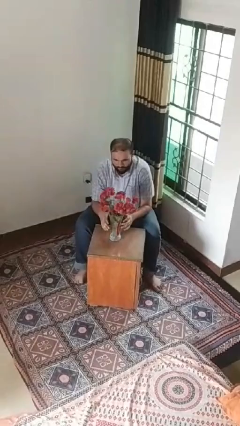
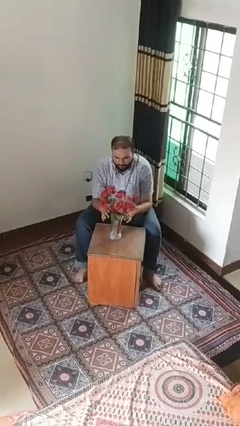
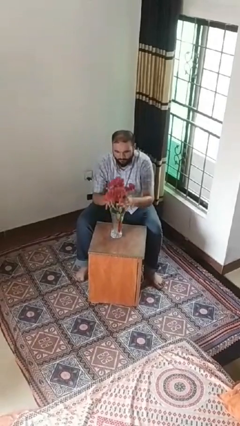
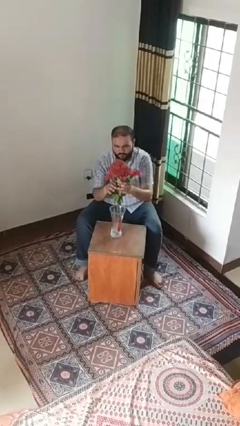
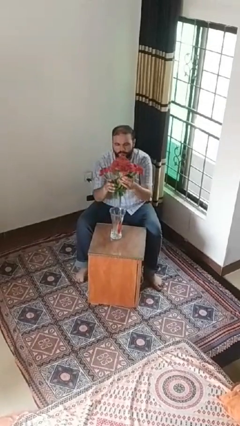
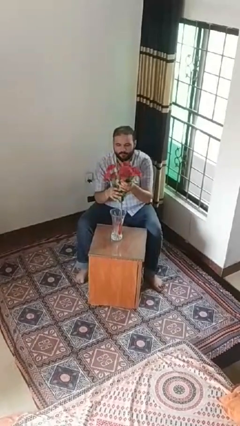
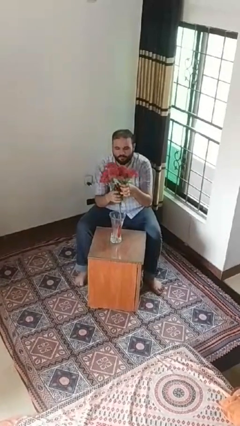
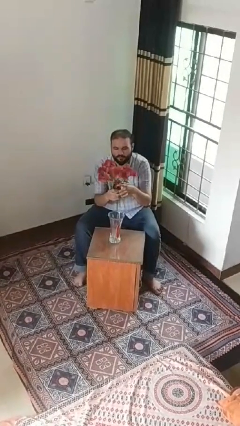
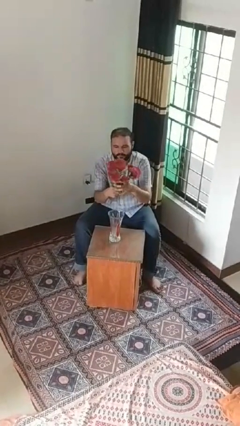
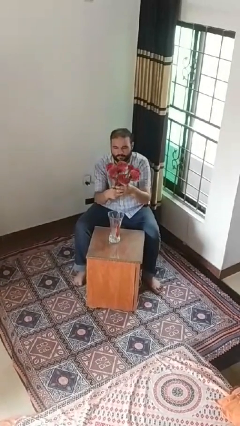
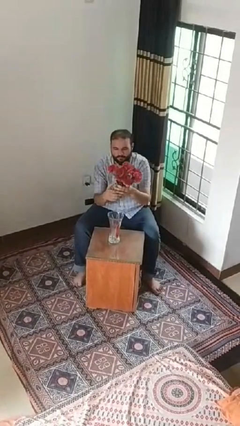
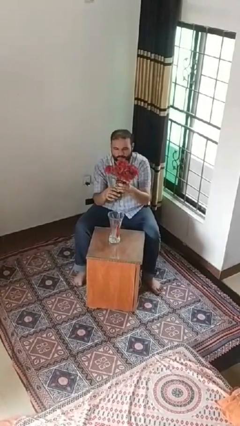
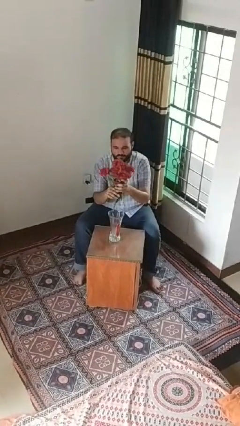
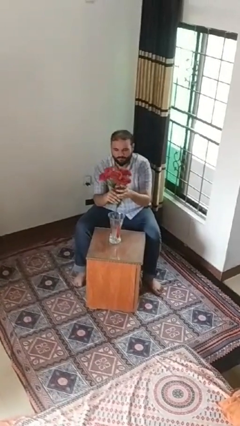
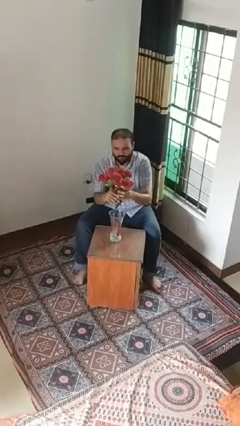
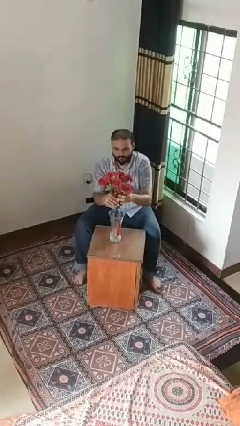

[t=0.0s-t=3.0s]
person arranges flowers in vase

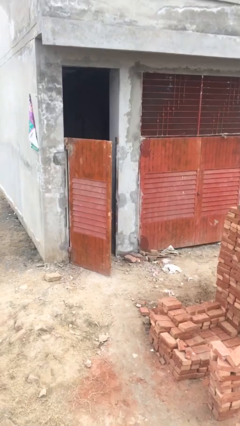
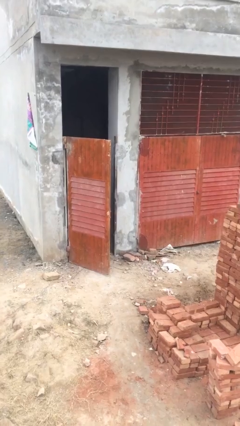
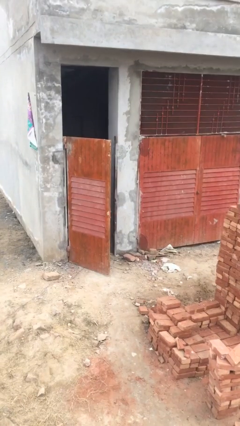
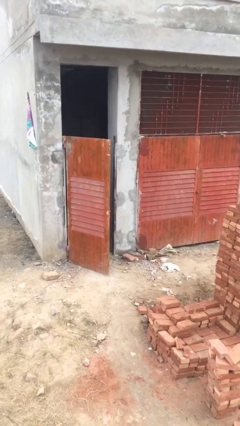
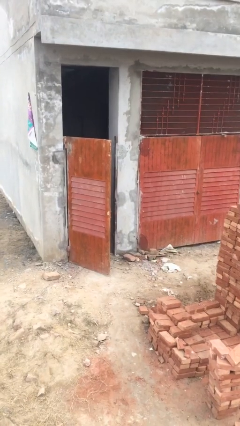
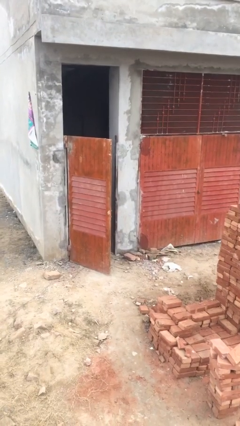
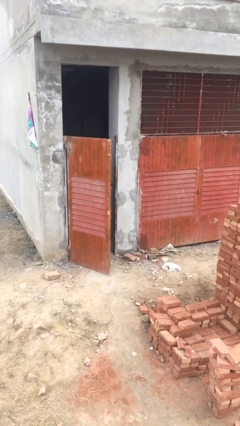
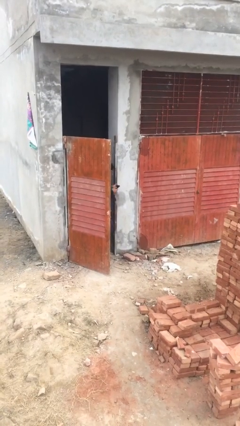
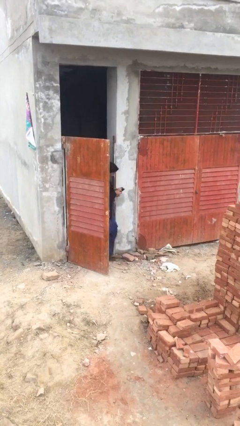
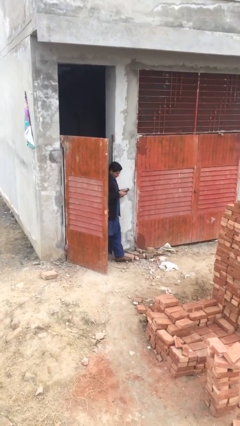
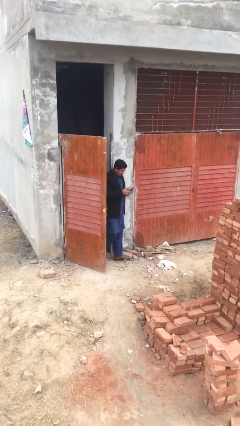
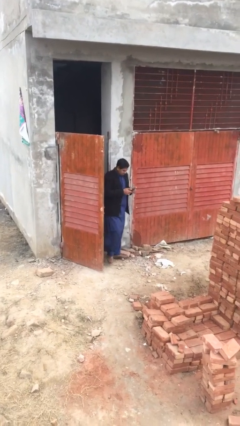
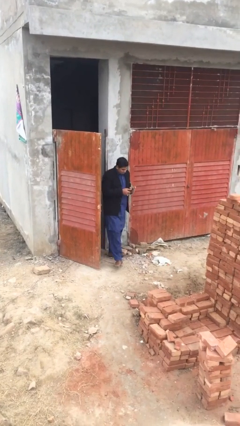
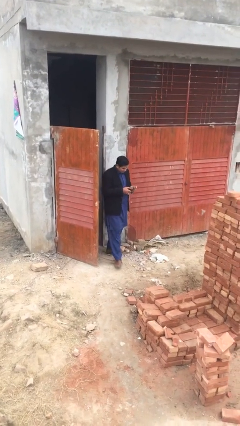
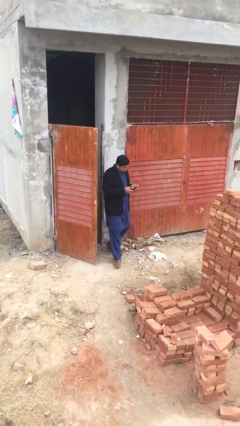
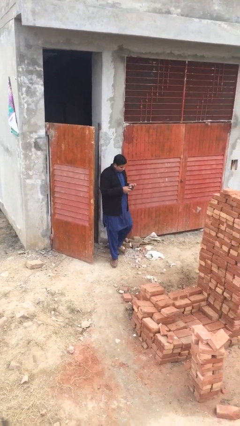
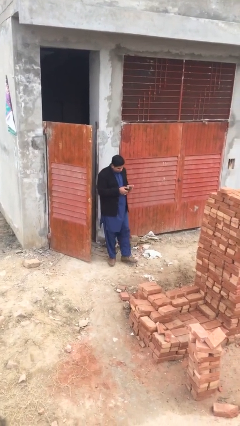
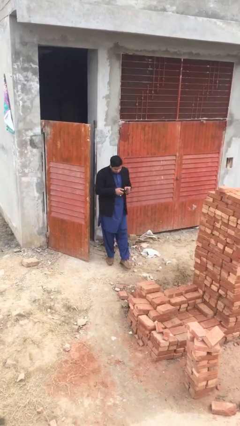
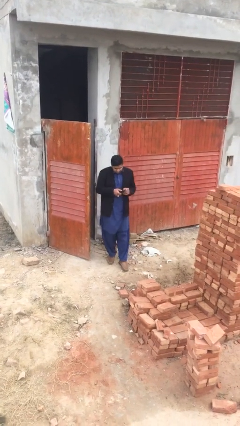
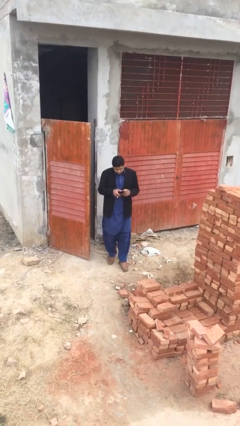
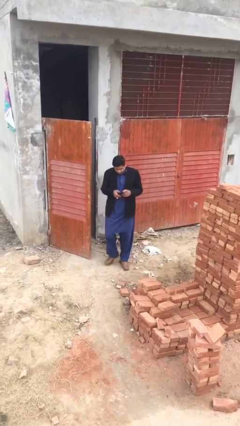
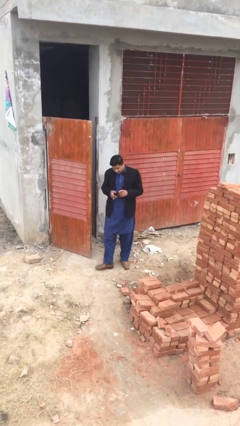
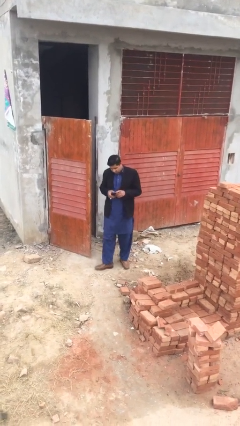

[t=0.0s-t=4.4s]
person enters scene through structure

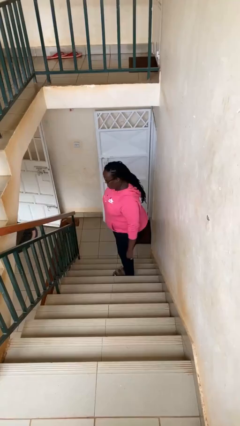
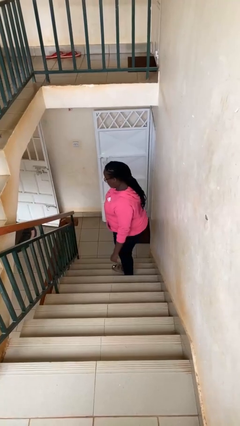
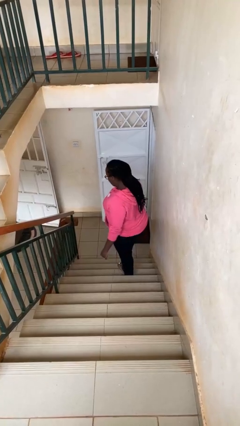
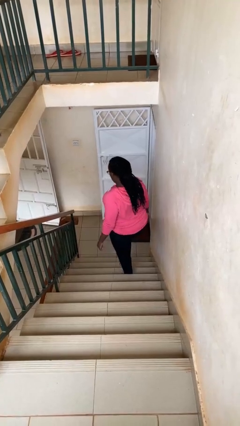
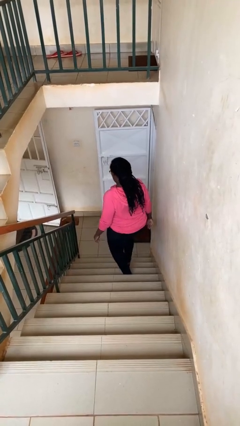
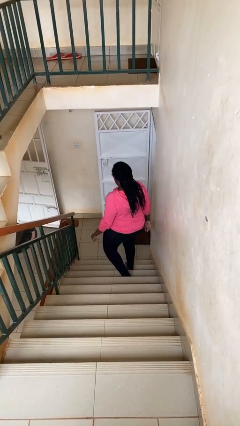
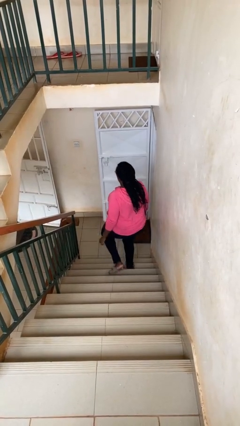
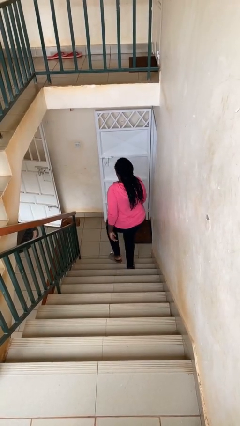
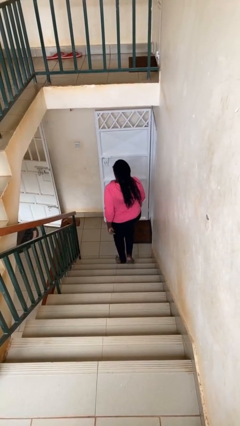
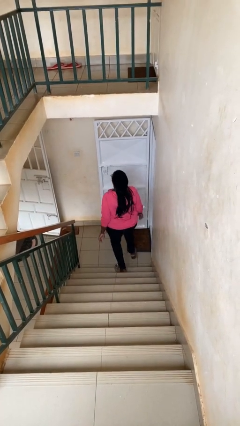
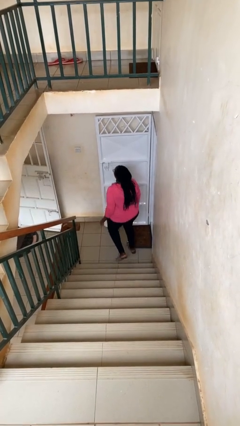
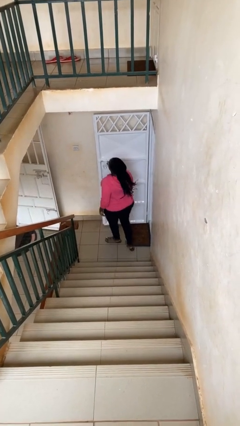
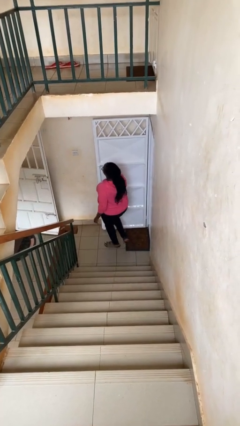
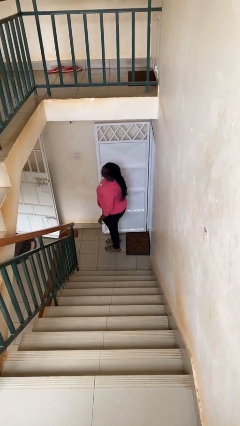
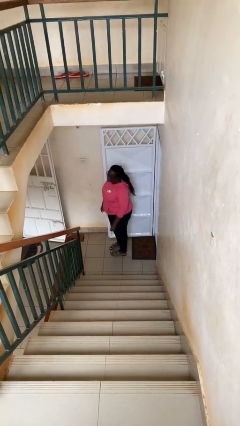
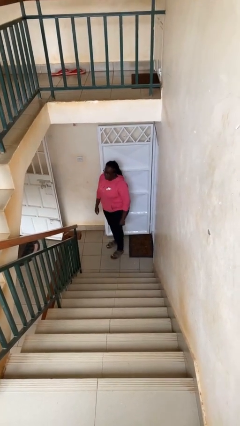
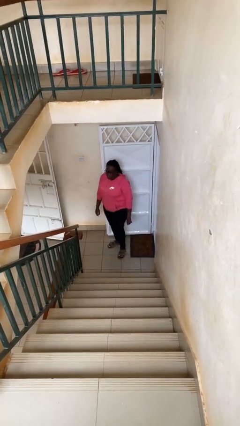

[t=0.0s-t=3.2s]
person climbs down stairs

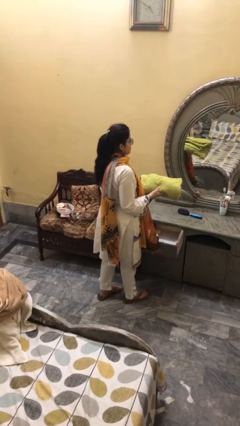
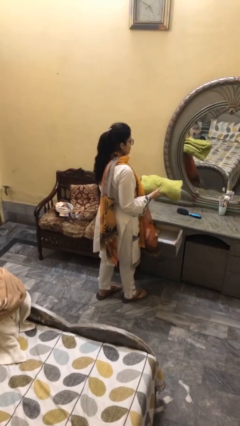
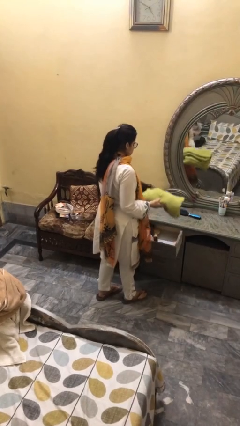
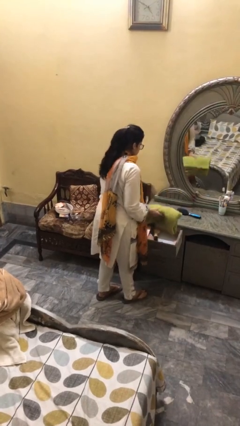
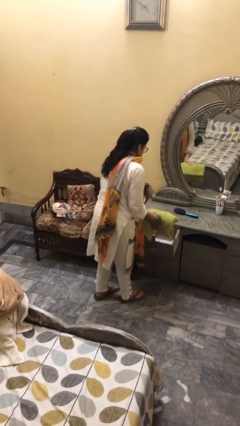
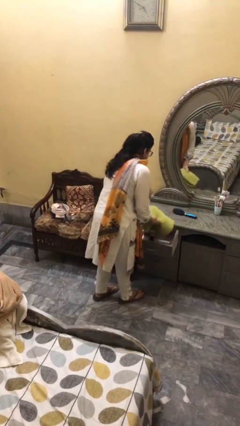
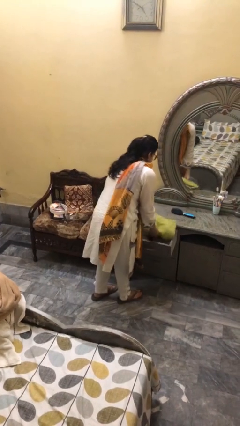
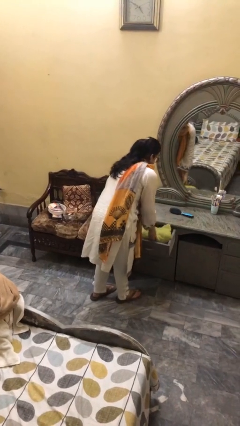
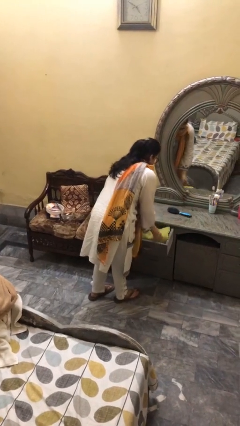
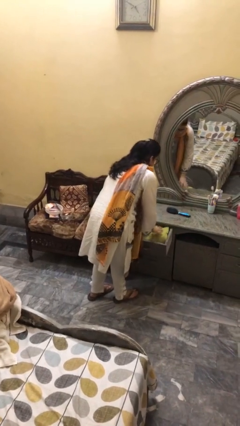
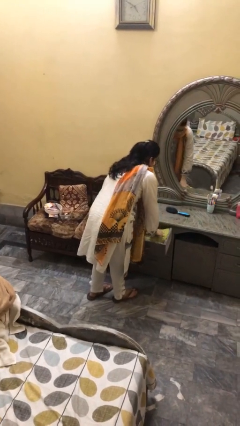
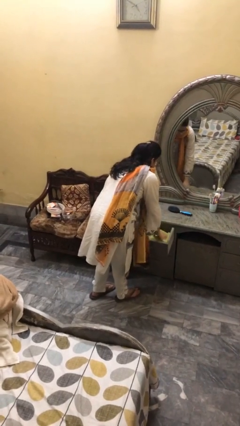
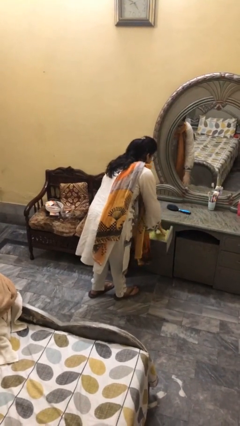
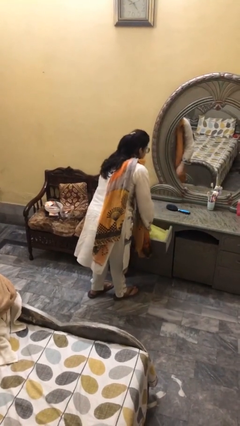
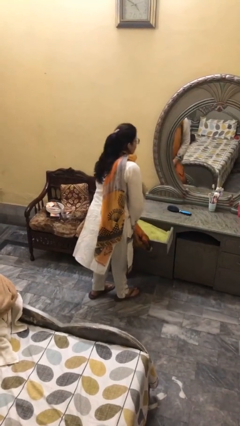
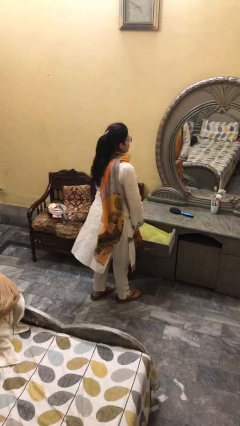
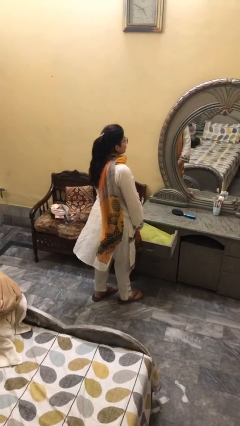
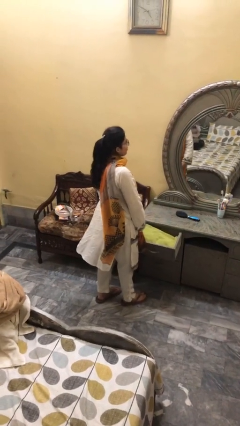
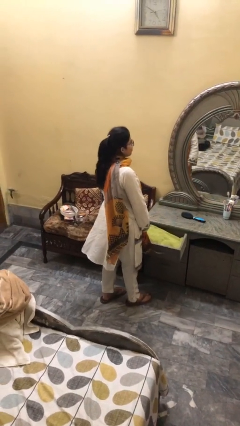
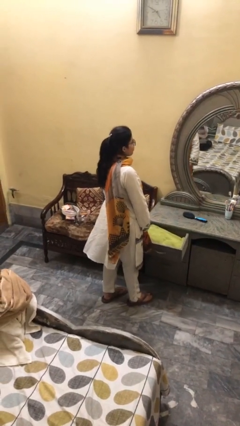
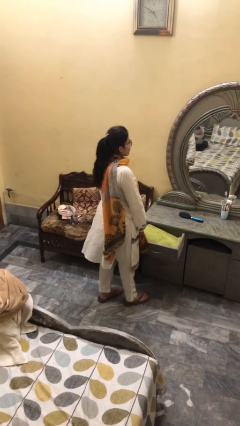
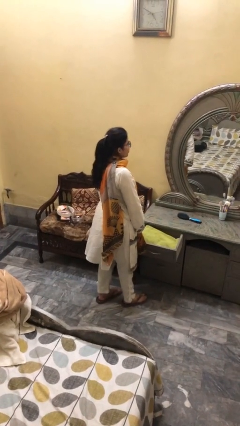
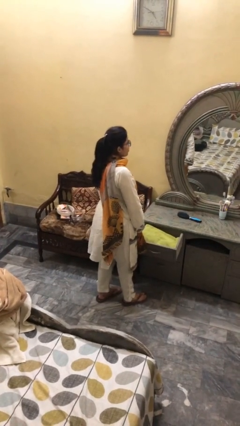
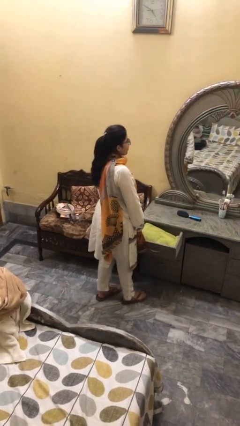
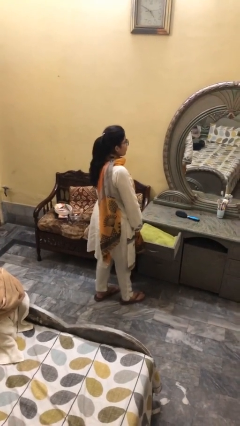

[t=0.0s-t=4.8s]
person puts clothes into dresser

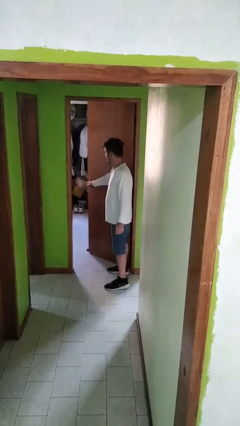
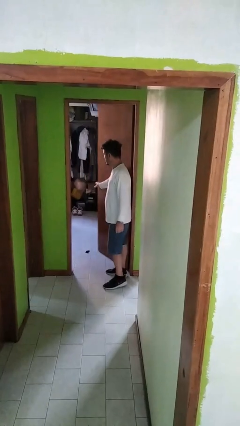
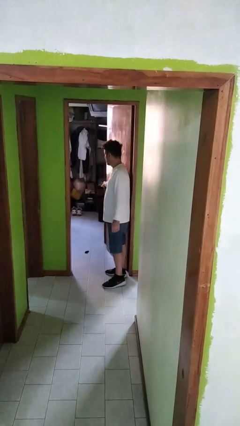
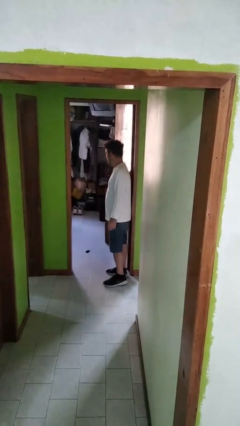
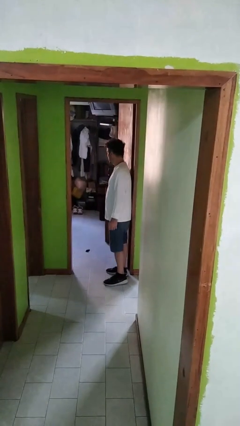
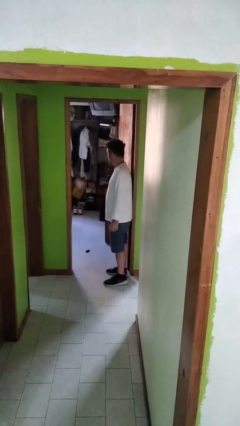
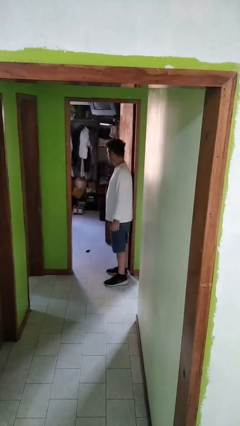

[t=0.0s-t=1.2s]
person opens facility door

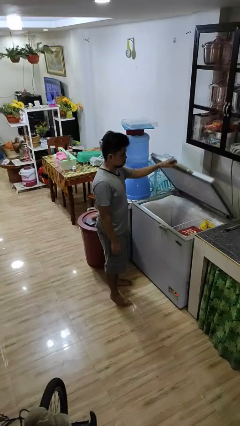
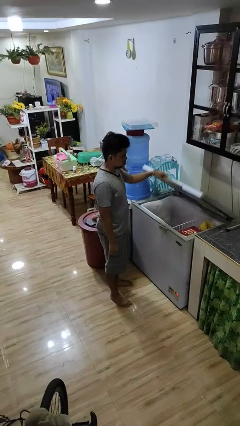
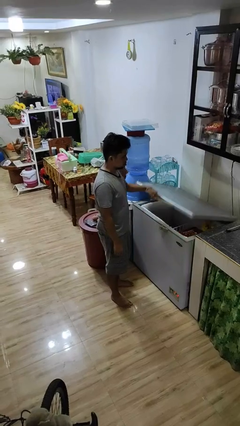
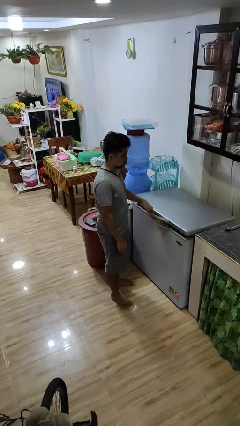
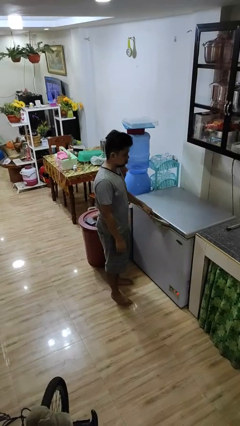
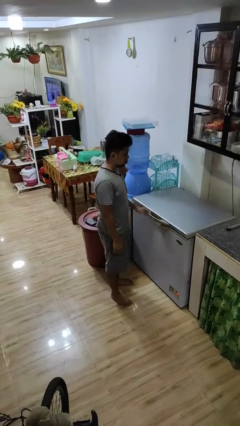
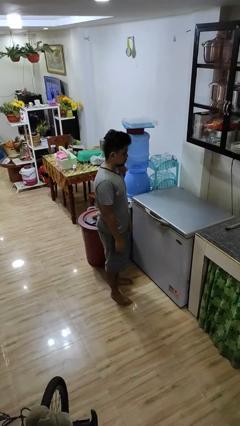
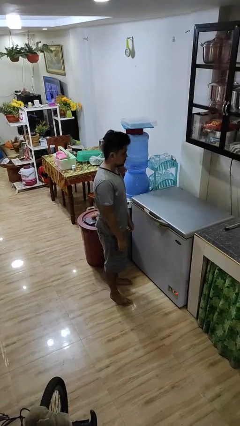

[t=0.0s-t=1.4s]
person closes refrigerator
